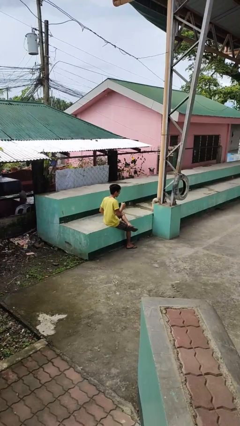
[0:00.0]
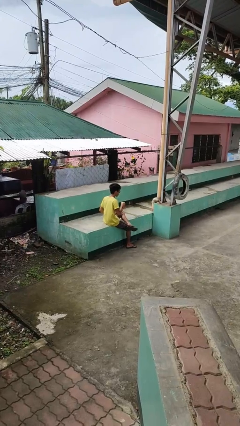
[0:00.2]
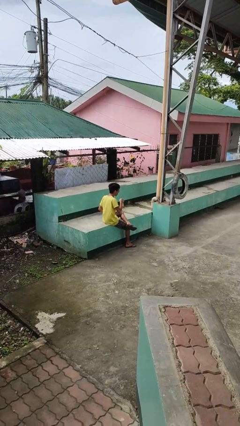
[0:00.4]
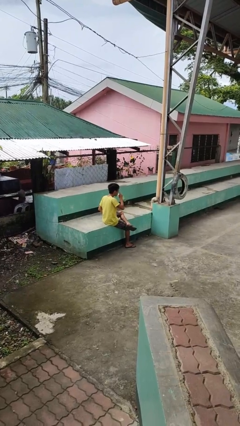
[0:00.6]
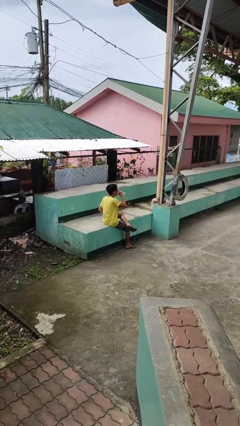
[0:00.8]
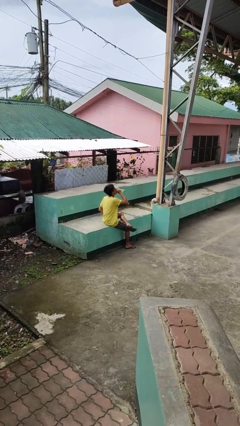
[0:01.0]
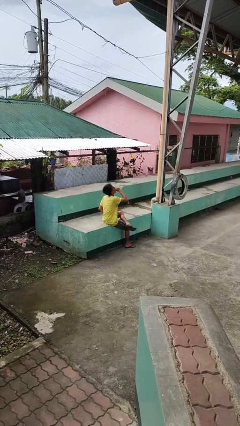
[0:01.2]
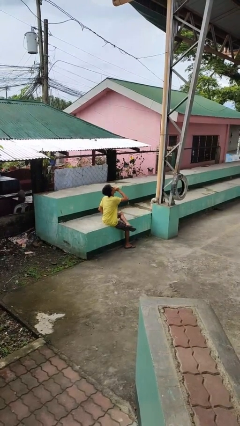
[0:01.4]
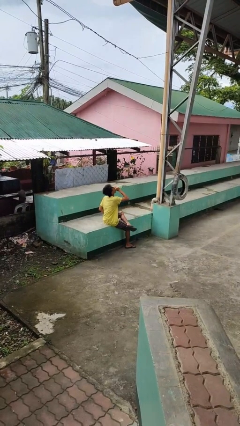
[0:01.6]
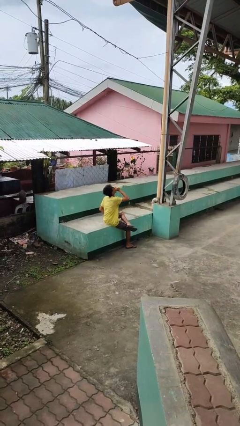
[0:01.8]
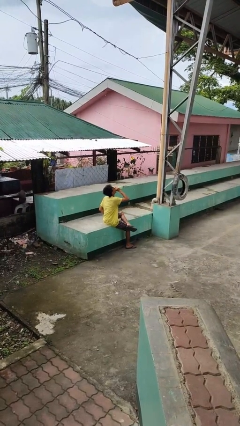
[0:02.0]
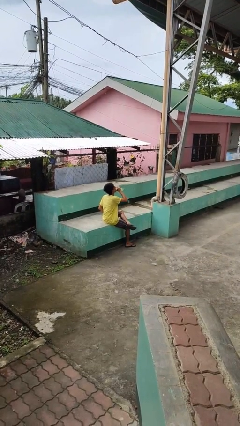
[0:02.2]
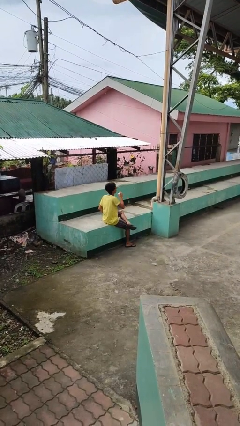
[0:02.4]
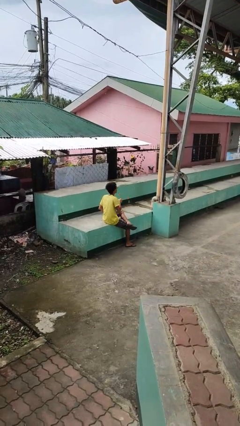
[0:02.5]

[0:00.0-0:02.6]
person drinks from bottle

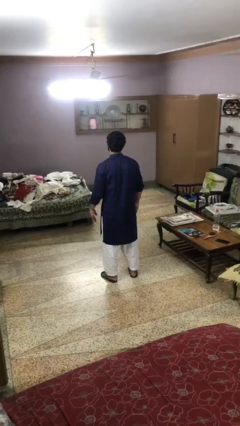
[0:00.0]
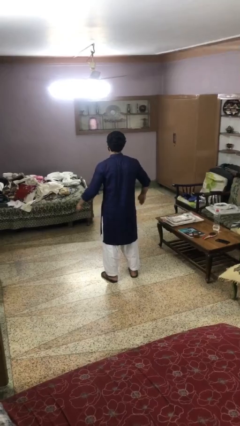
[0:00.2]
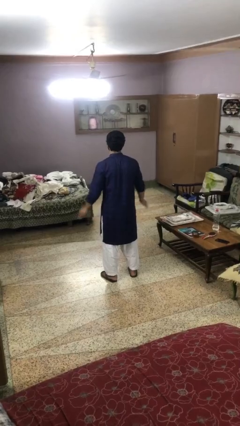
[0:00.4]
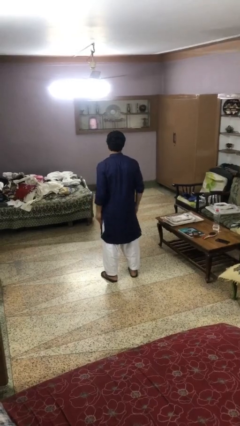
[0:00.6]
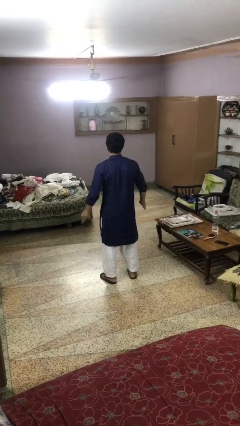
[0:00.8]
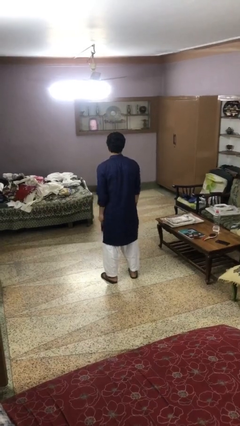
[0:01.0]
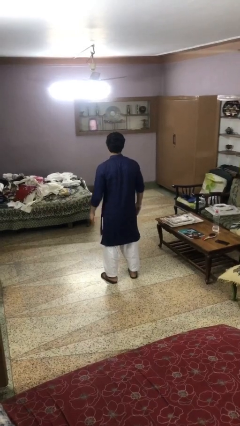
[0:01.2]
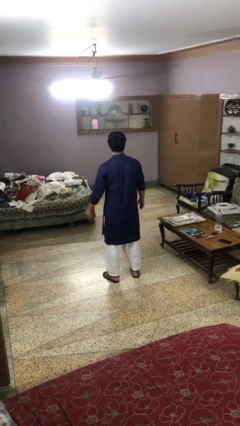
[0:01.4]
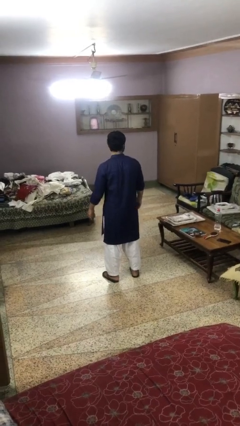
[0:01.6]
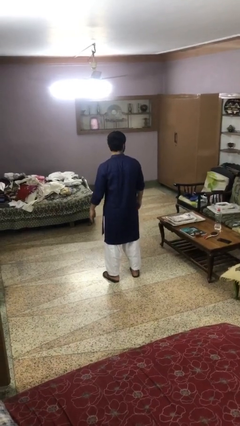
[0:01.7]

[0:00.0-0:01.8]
person slaps hands on thighs

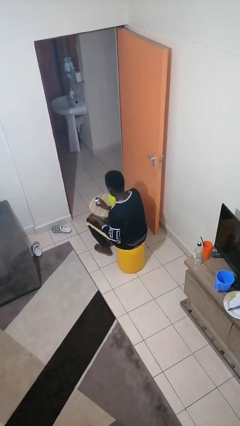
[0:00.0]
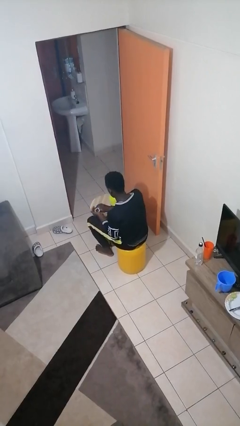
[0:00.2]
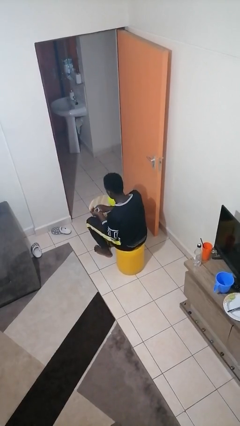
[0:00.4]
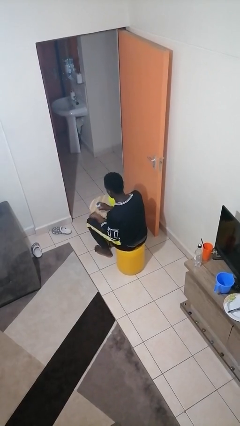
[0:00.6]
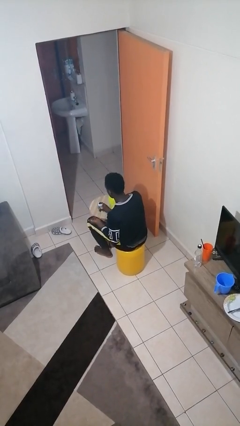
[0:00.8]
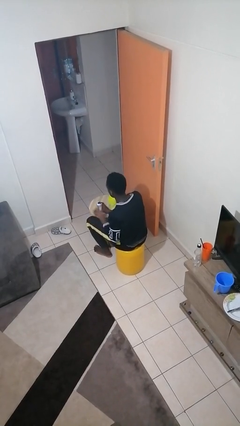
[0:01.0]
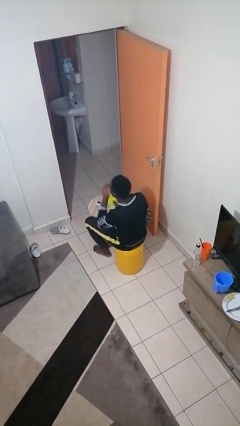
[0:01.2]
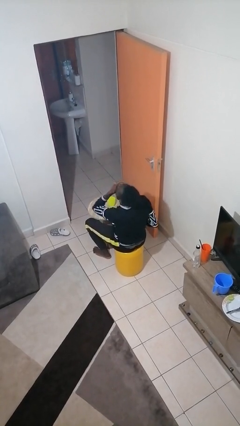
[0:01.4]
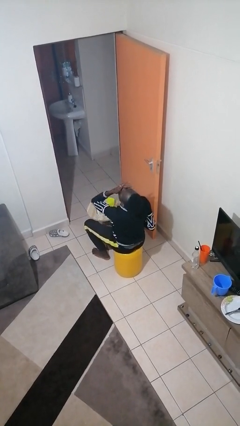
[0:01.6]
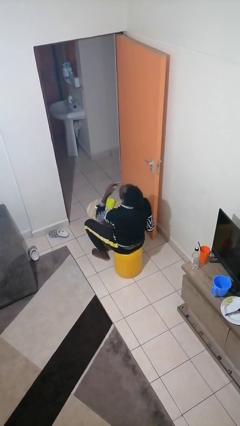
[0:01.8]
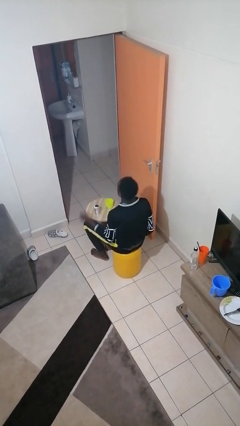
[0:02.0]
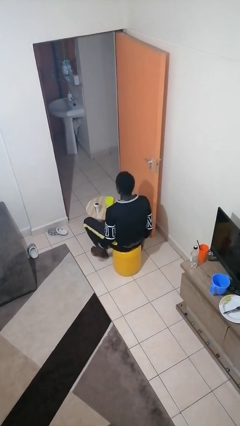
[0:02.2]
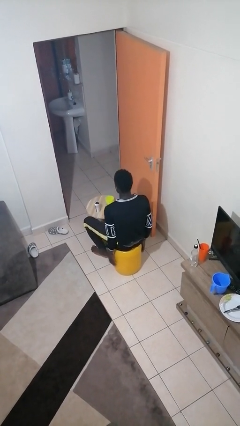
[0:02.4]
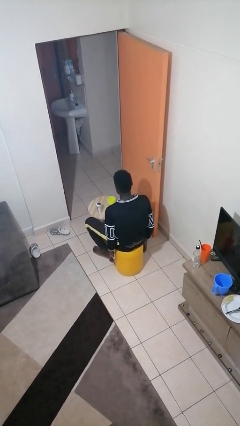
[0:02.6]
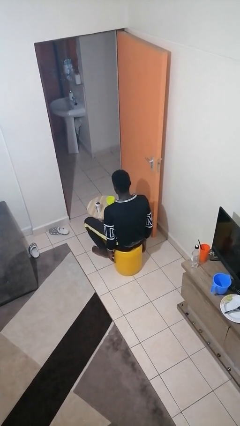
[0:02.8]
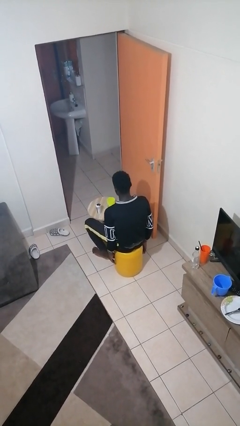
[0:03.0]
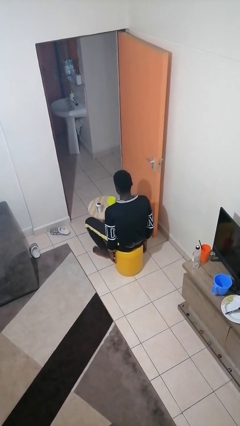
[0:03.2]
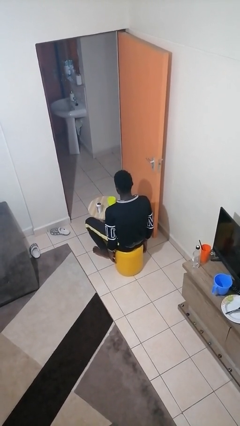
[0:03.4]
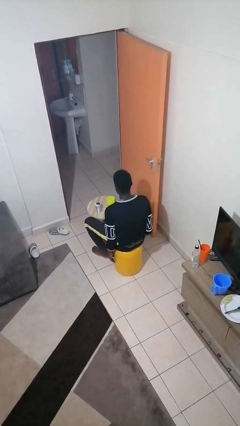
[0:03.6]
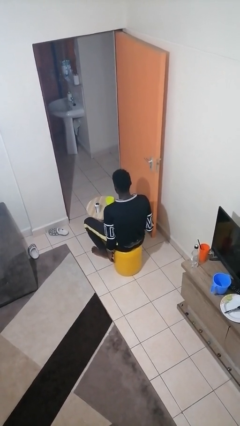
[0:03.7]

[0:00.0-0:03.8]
person takes medicine pills

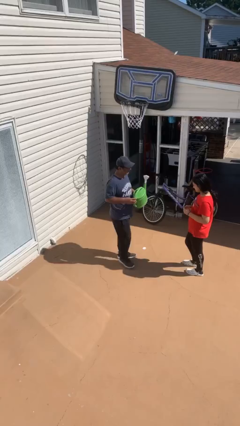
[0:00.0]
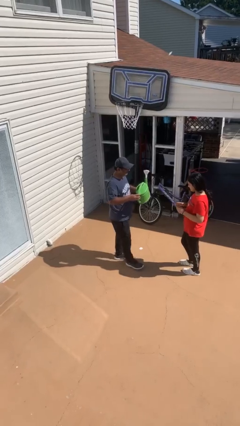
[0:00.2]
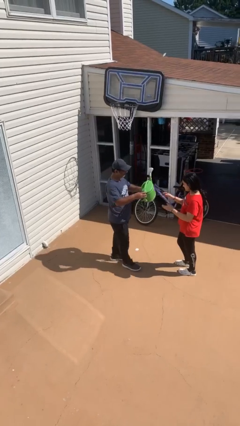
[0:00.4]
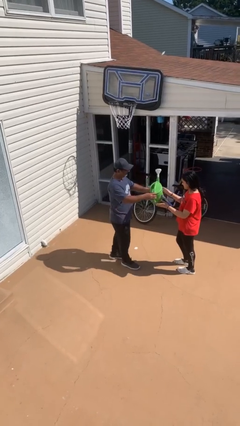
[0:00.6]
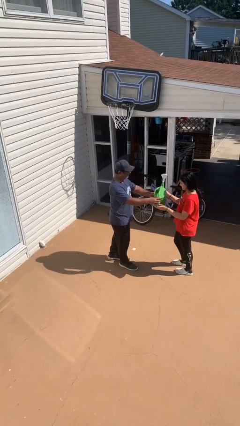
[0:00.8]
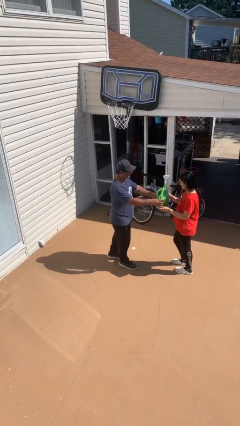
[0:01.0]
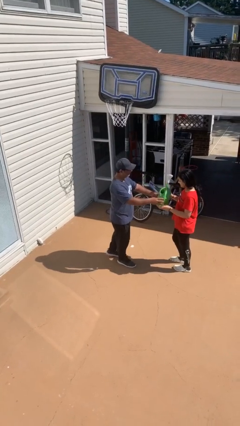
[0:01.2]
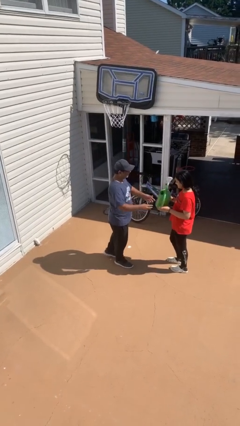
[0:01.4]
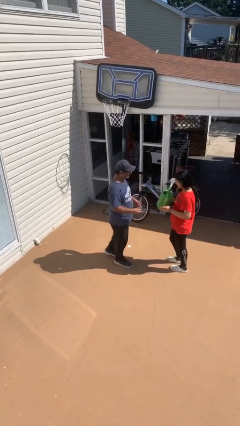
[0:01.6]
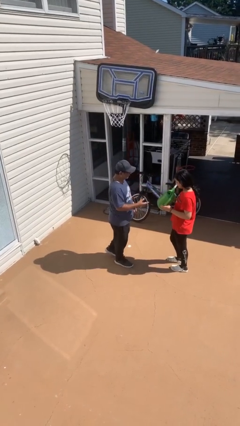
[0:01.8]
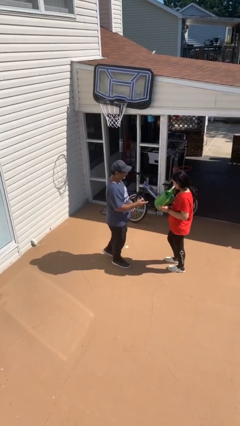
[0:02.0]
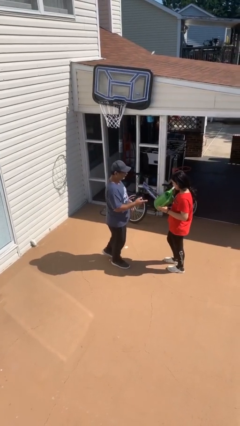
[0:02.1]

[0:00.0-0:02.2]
person transfers object to person

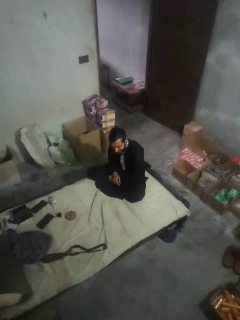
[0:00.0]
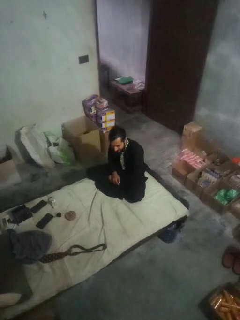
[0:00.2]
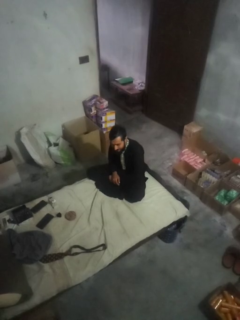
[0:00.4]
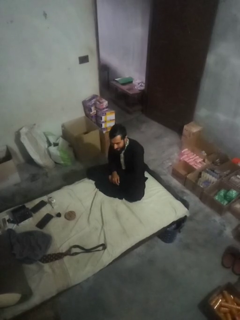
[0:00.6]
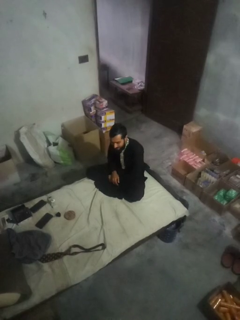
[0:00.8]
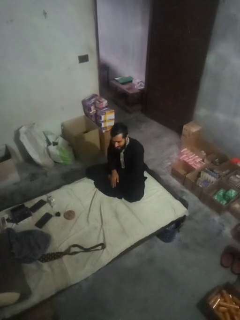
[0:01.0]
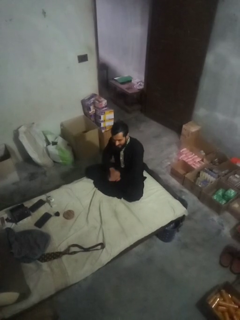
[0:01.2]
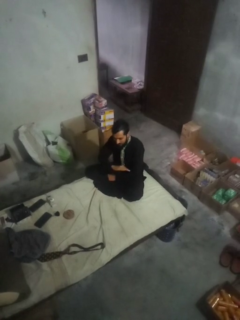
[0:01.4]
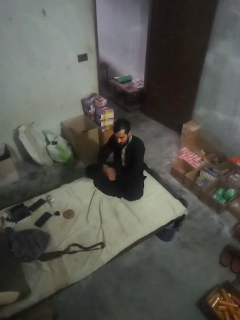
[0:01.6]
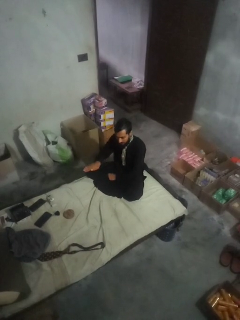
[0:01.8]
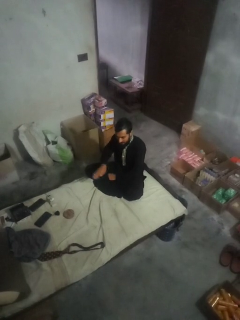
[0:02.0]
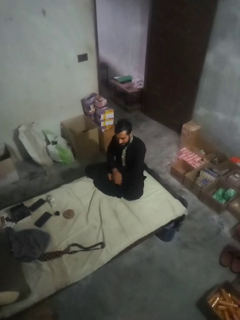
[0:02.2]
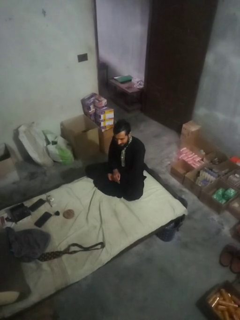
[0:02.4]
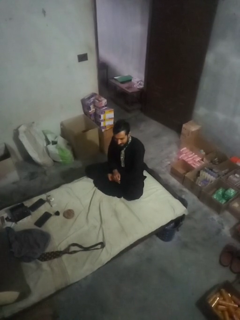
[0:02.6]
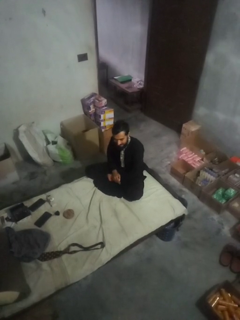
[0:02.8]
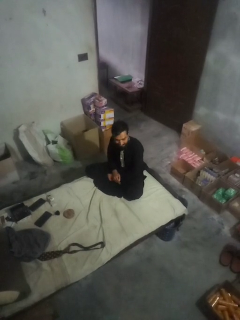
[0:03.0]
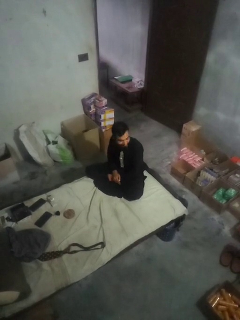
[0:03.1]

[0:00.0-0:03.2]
person gestures cut

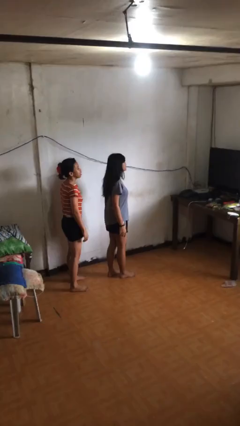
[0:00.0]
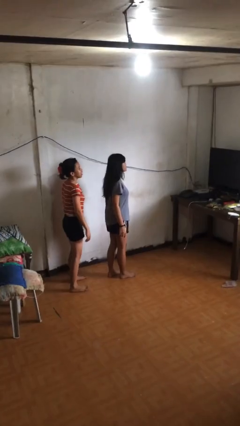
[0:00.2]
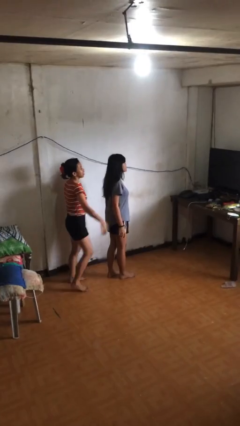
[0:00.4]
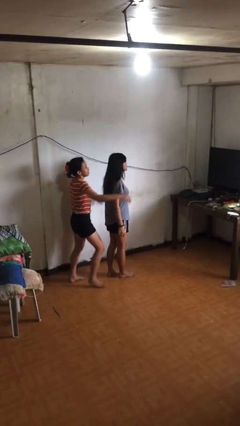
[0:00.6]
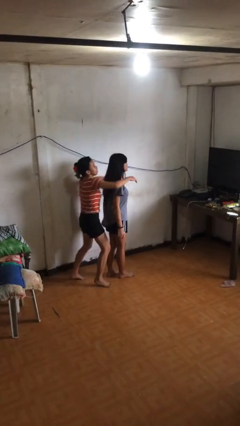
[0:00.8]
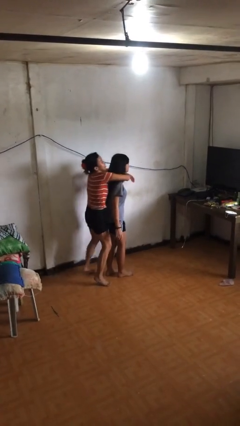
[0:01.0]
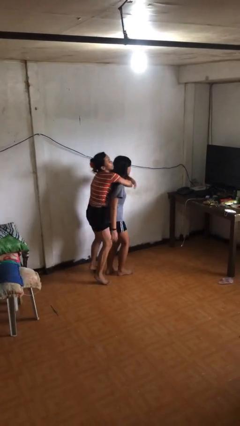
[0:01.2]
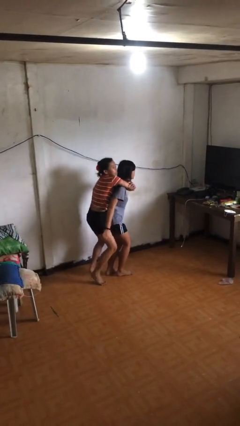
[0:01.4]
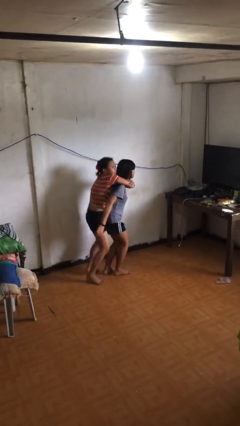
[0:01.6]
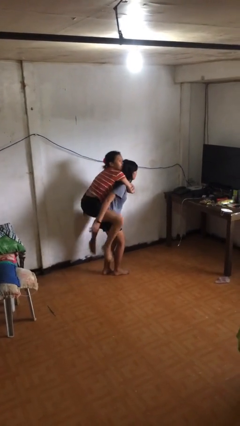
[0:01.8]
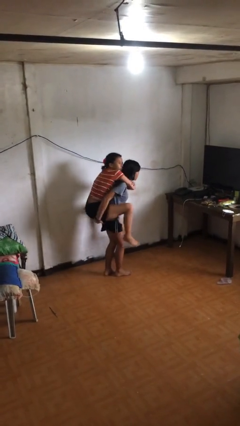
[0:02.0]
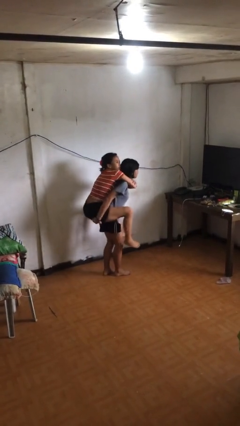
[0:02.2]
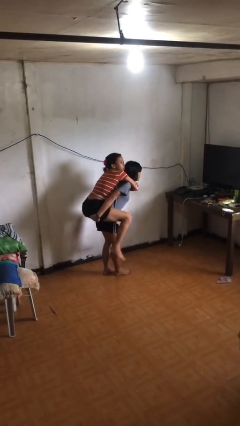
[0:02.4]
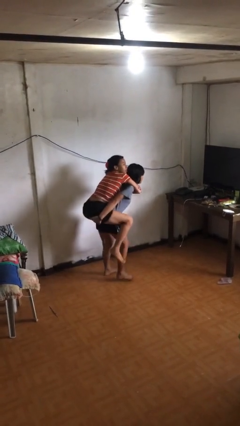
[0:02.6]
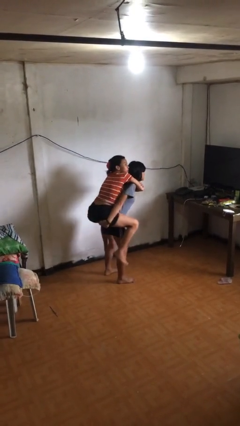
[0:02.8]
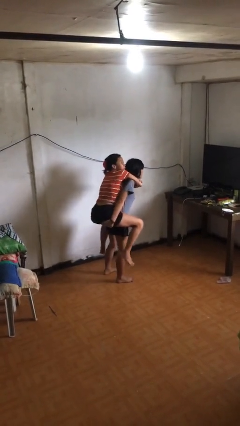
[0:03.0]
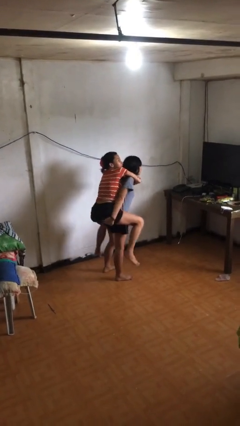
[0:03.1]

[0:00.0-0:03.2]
person carries person over shoulder

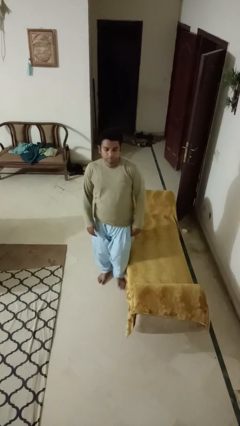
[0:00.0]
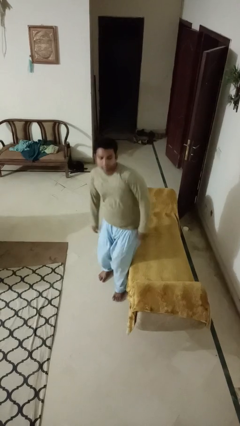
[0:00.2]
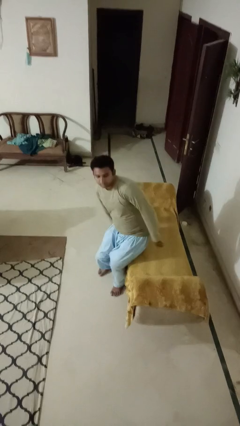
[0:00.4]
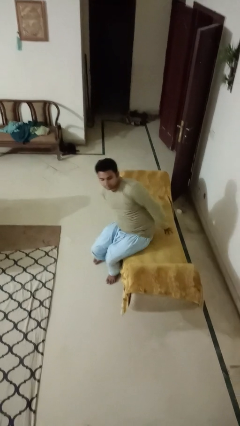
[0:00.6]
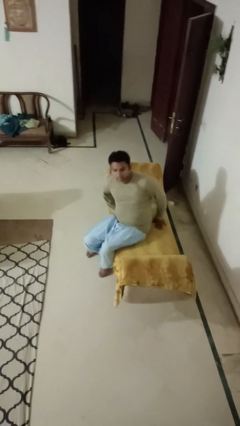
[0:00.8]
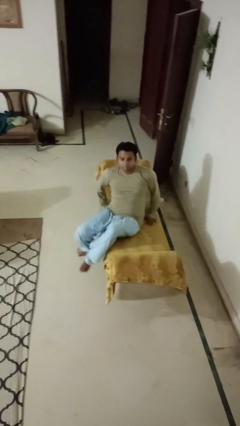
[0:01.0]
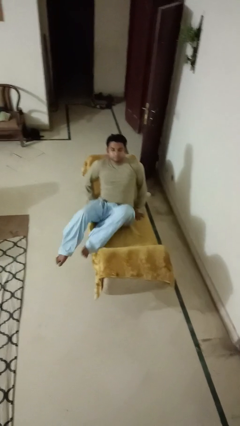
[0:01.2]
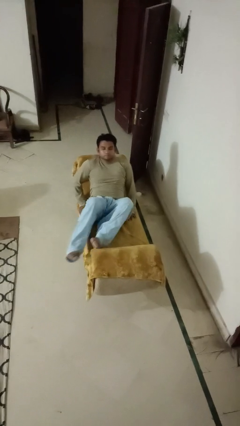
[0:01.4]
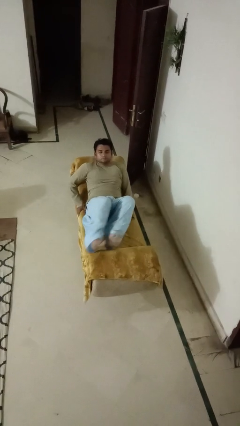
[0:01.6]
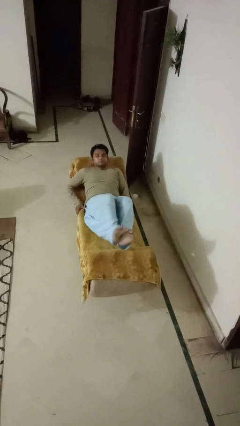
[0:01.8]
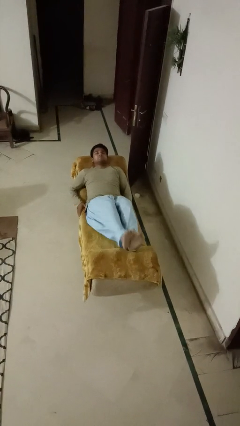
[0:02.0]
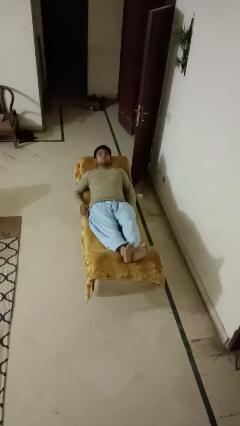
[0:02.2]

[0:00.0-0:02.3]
person lies down on couch
